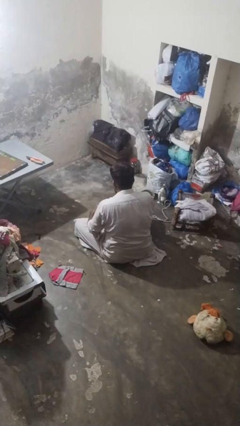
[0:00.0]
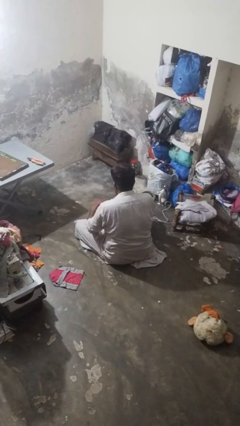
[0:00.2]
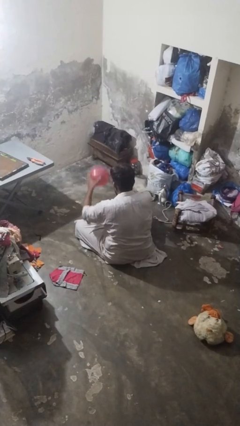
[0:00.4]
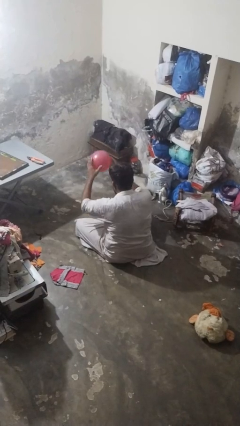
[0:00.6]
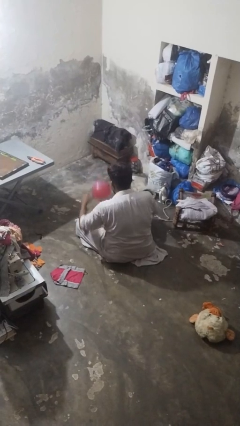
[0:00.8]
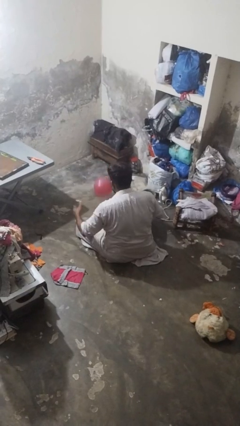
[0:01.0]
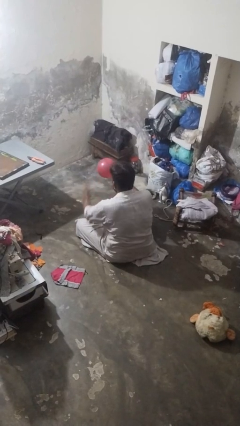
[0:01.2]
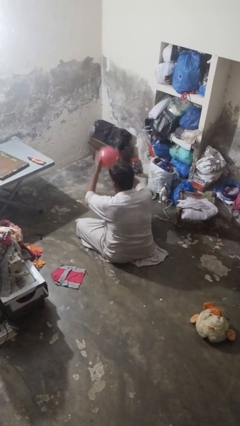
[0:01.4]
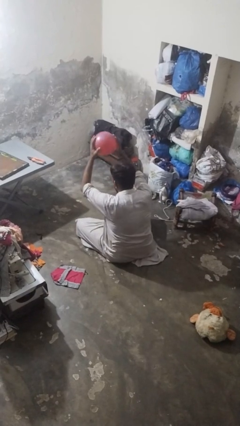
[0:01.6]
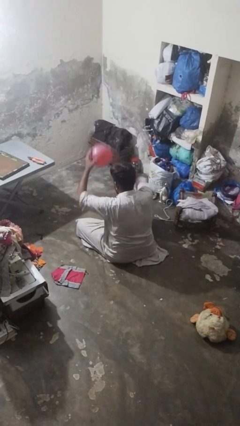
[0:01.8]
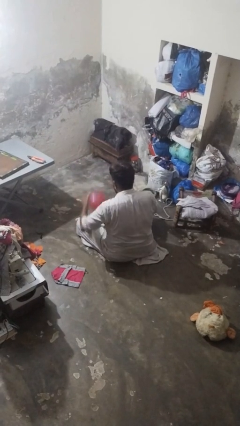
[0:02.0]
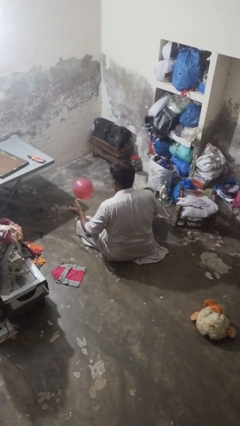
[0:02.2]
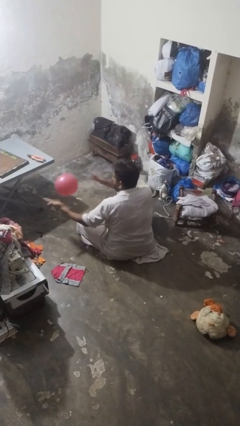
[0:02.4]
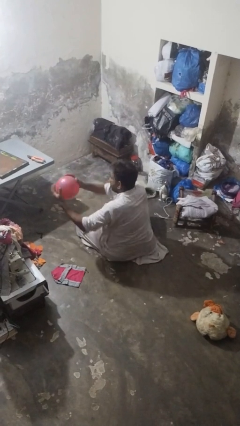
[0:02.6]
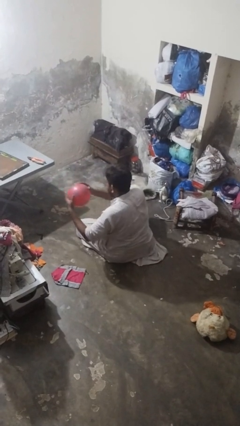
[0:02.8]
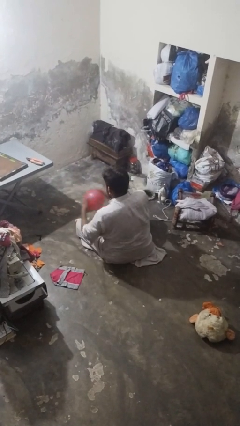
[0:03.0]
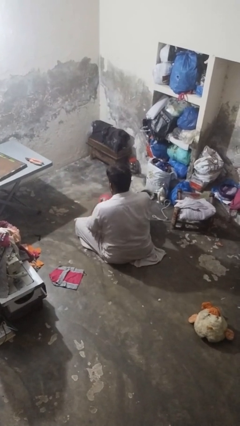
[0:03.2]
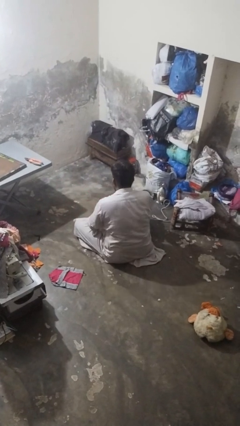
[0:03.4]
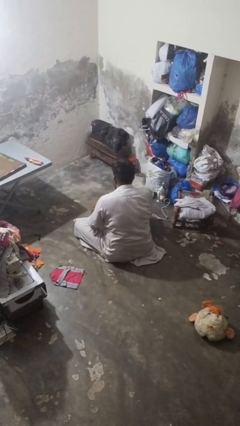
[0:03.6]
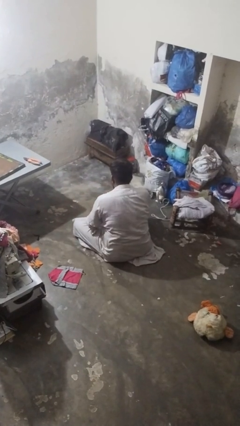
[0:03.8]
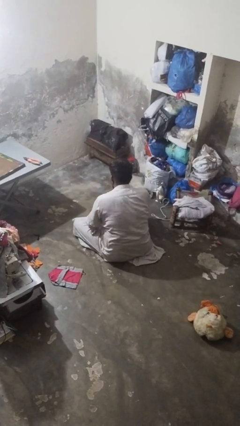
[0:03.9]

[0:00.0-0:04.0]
person bounces ball on floor

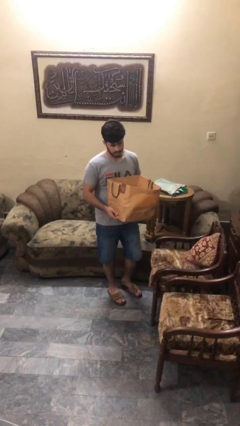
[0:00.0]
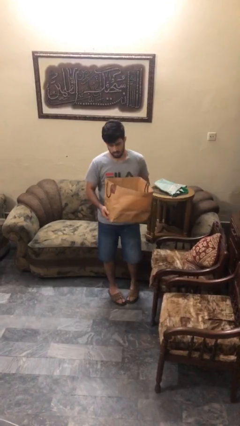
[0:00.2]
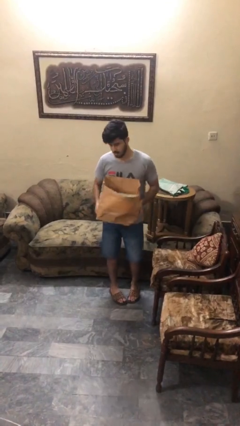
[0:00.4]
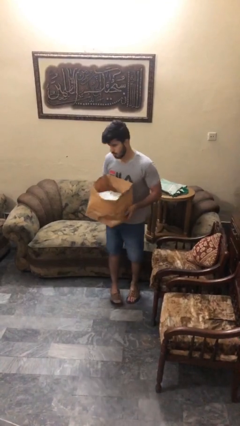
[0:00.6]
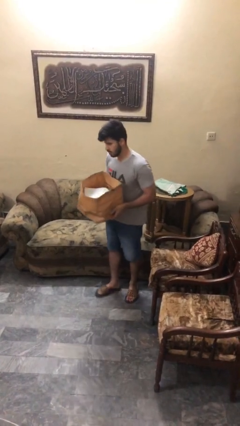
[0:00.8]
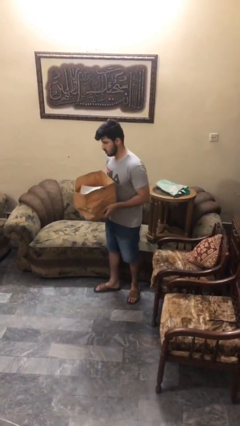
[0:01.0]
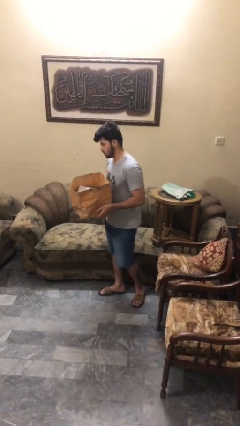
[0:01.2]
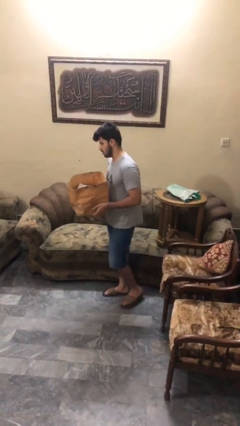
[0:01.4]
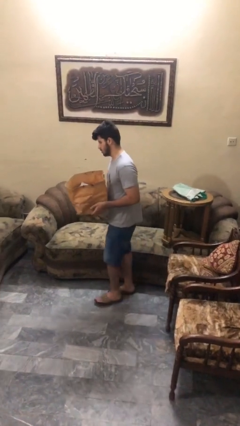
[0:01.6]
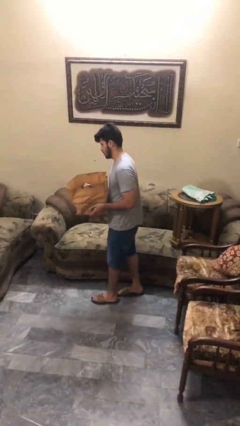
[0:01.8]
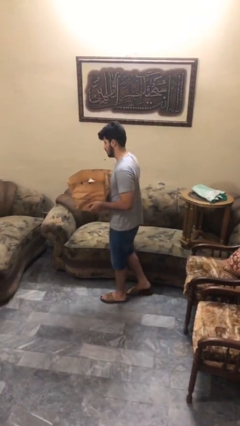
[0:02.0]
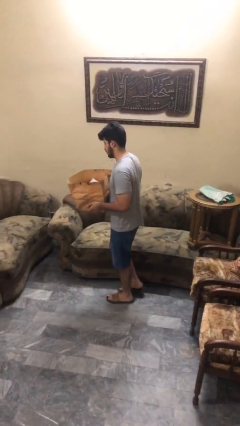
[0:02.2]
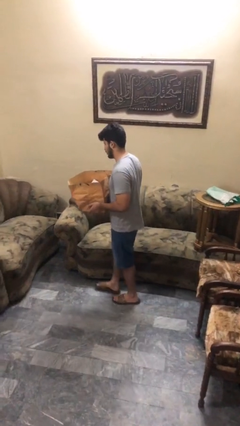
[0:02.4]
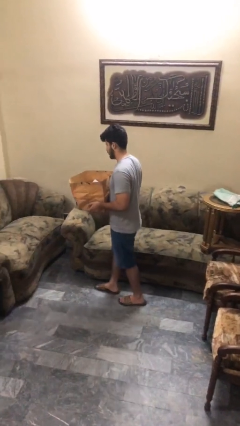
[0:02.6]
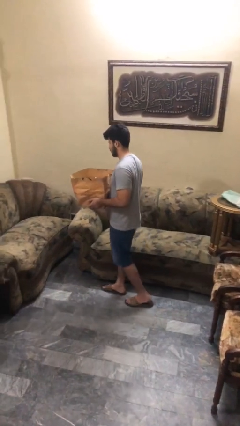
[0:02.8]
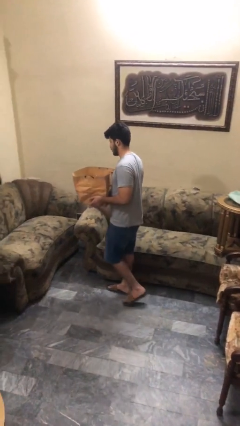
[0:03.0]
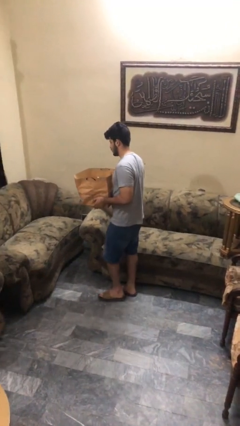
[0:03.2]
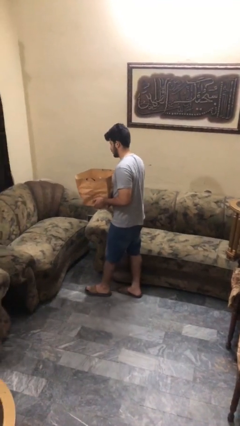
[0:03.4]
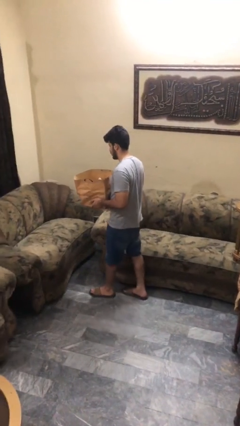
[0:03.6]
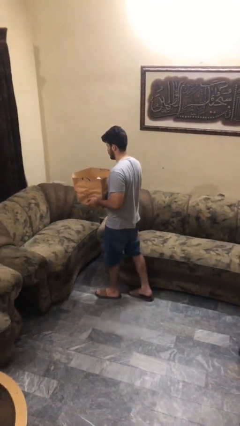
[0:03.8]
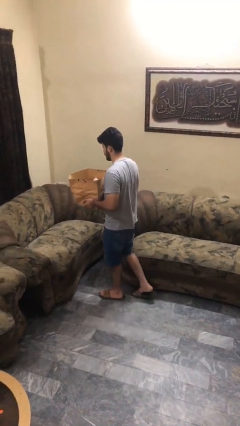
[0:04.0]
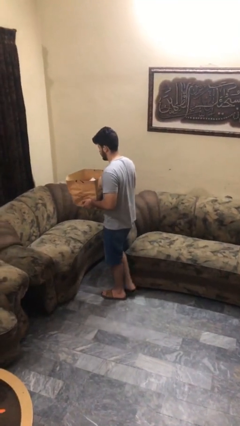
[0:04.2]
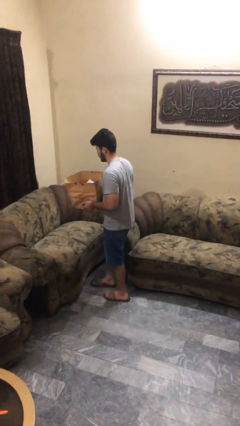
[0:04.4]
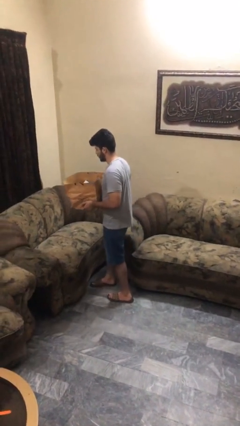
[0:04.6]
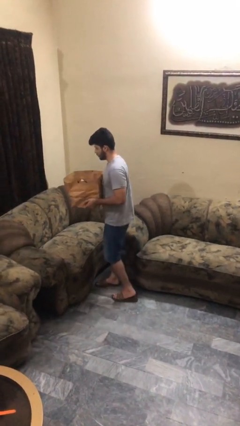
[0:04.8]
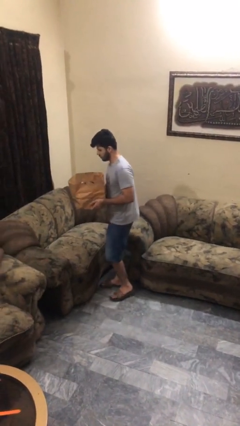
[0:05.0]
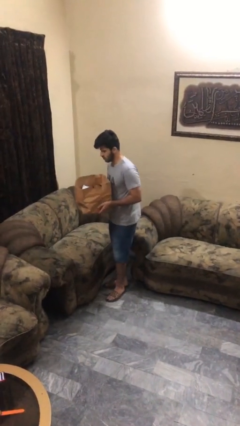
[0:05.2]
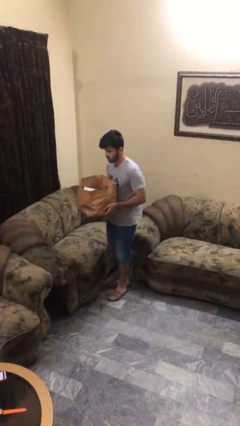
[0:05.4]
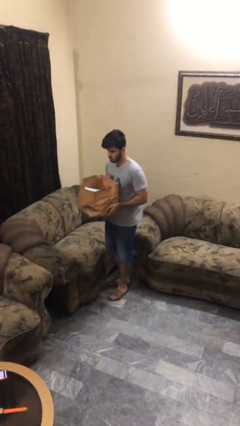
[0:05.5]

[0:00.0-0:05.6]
person carries groceries

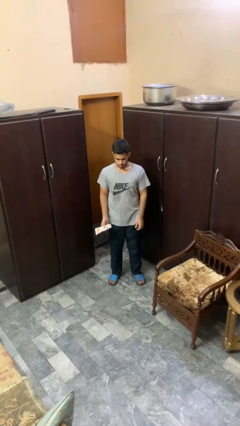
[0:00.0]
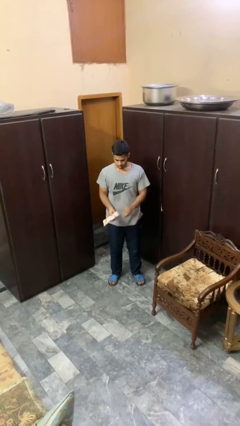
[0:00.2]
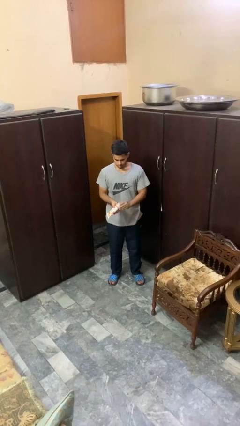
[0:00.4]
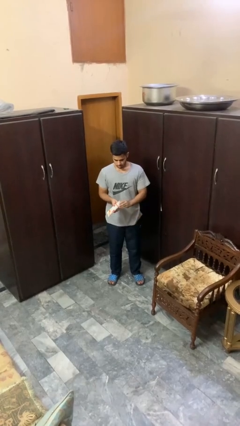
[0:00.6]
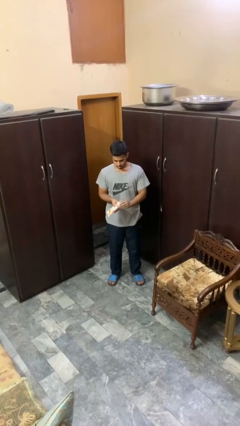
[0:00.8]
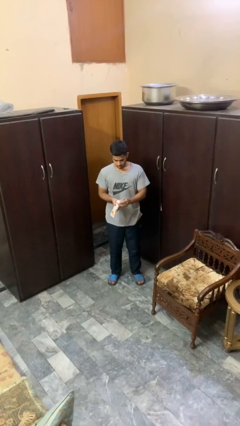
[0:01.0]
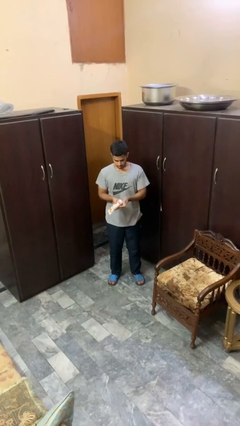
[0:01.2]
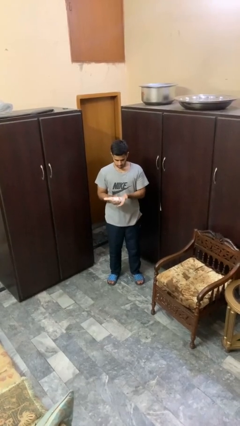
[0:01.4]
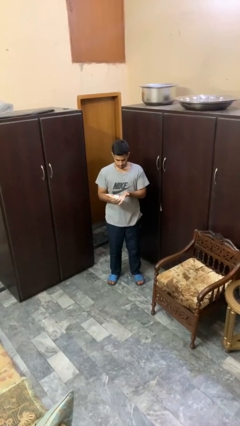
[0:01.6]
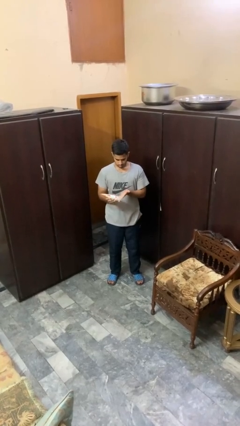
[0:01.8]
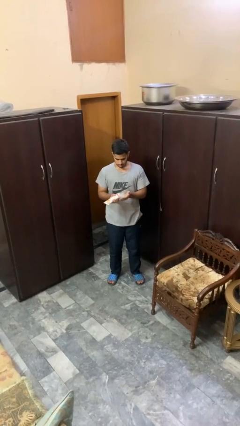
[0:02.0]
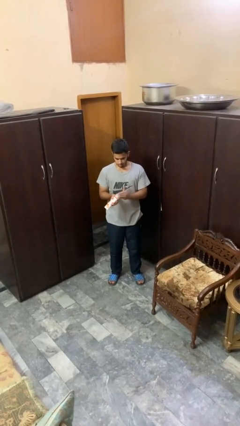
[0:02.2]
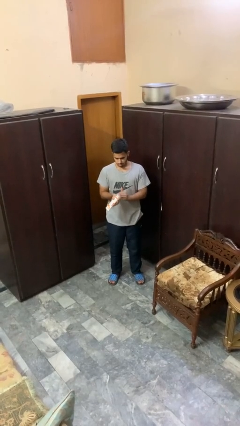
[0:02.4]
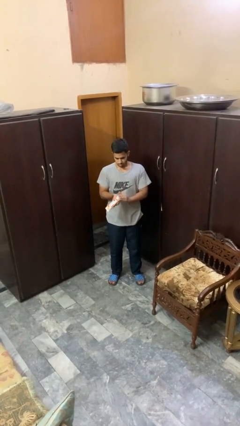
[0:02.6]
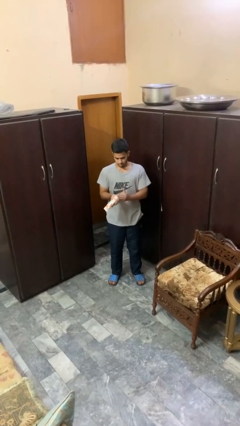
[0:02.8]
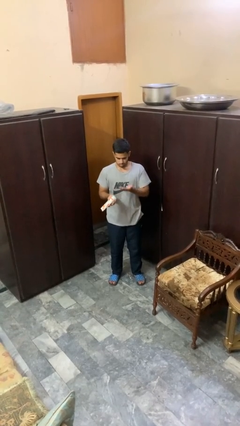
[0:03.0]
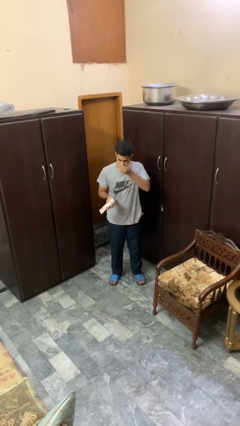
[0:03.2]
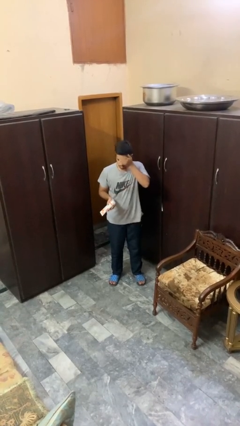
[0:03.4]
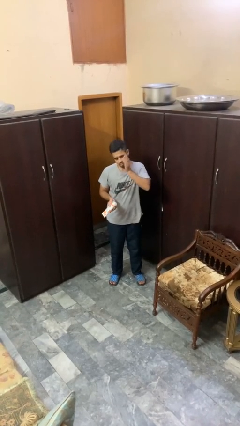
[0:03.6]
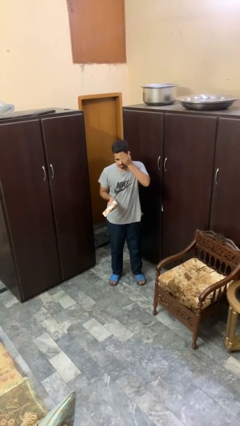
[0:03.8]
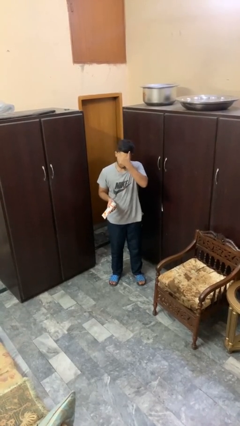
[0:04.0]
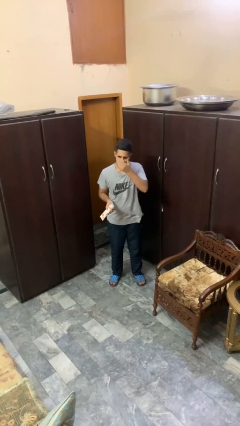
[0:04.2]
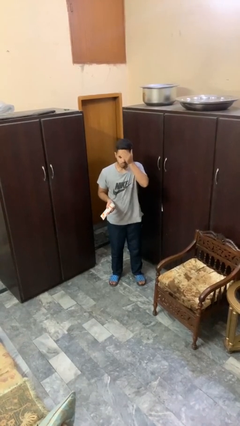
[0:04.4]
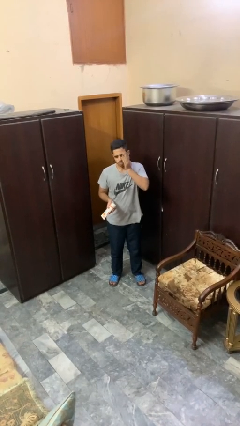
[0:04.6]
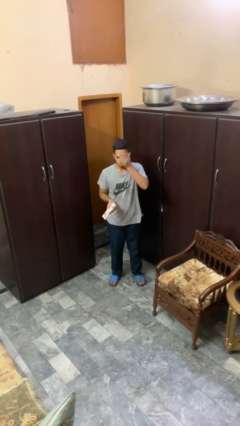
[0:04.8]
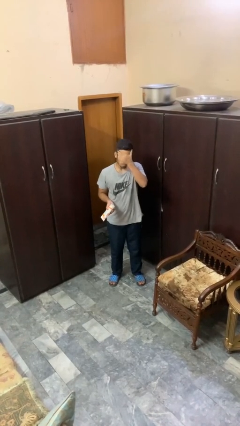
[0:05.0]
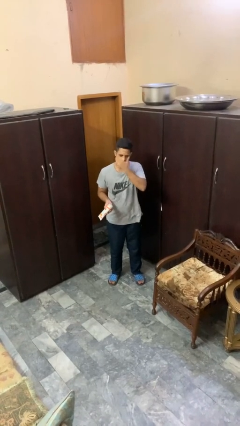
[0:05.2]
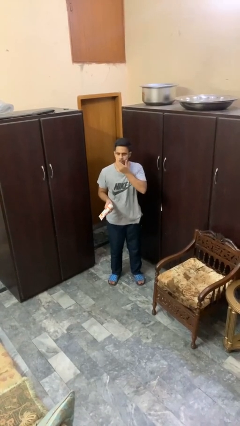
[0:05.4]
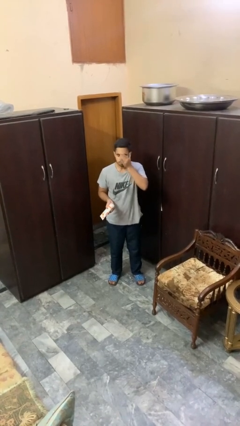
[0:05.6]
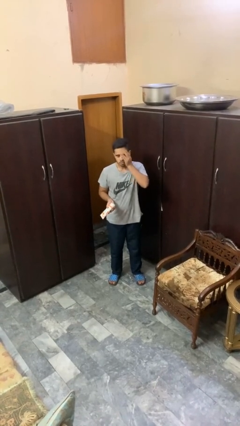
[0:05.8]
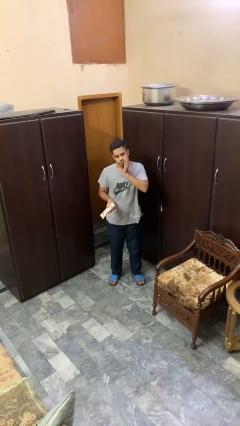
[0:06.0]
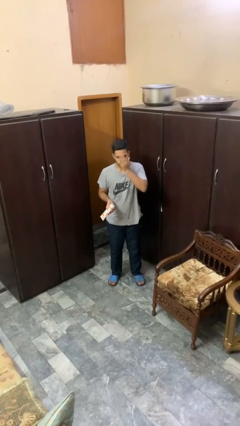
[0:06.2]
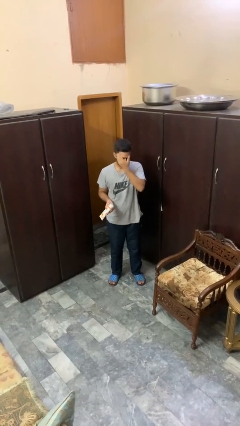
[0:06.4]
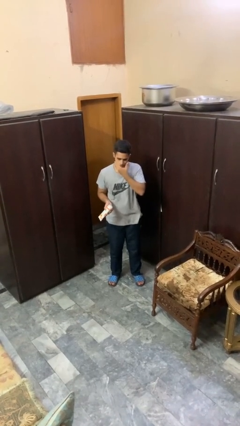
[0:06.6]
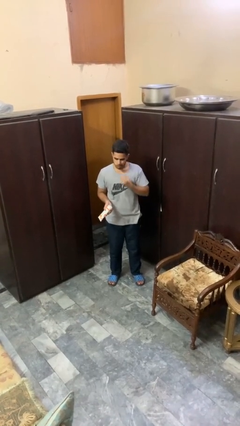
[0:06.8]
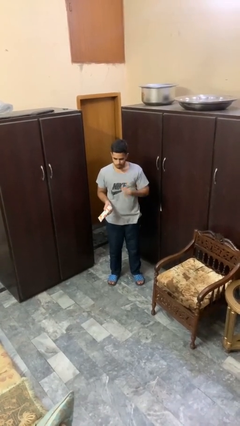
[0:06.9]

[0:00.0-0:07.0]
person applies sunscreen

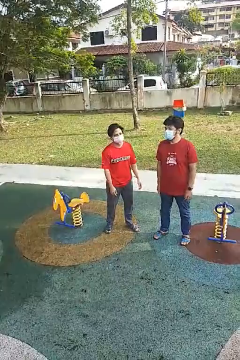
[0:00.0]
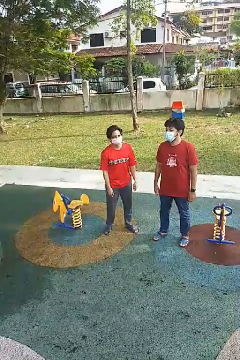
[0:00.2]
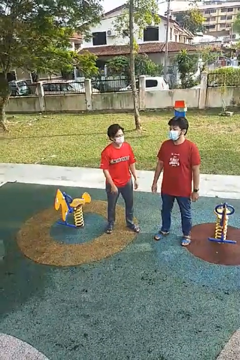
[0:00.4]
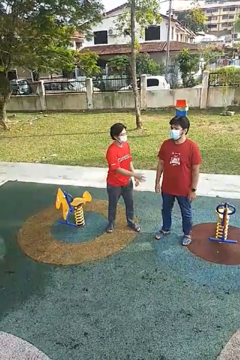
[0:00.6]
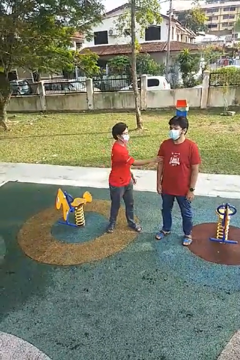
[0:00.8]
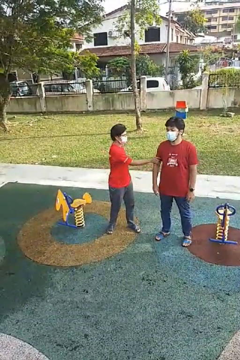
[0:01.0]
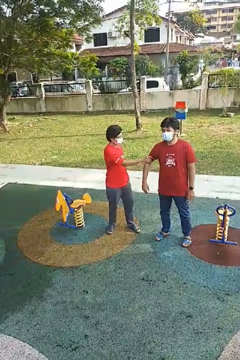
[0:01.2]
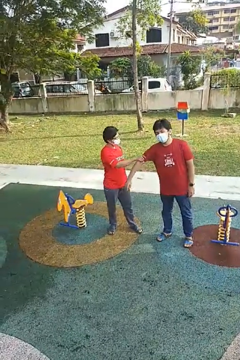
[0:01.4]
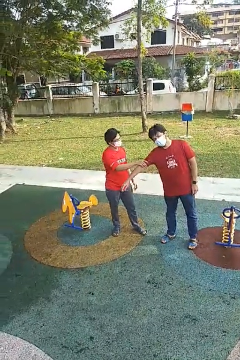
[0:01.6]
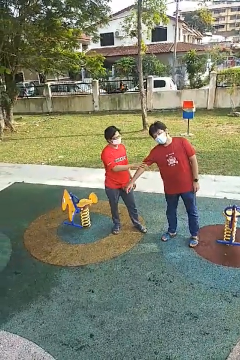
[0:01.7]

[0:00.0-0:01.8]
person grabs person by bicep
